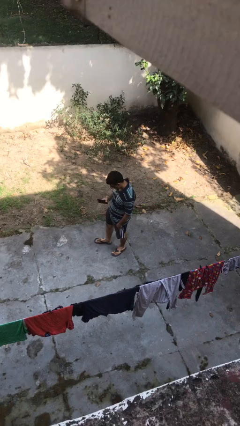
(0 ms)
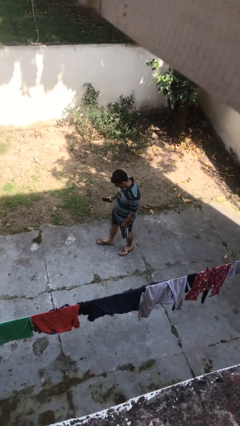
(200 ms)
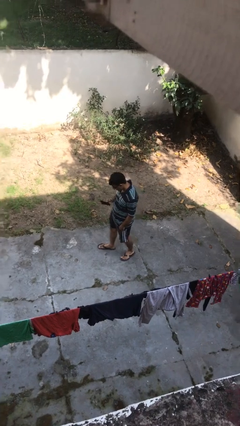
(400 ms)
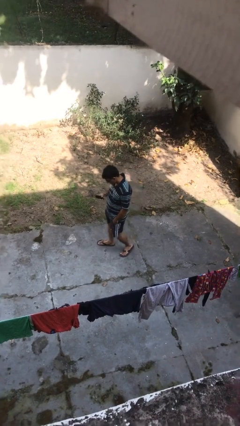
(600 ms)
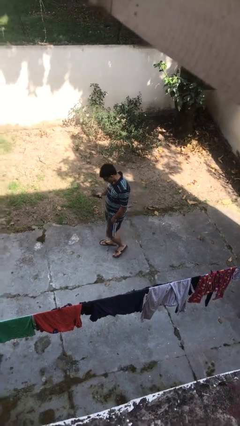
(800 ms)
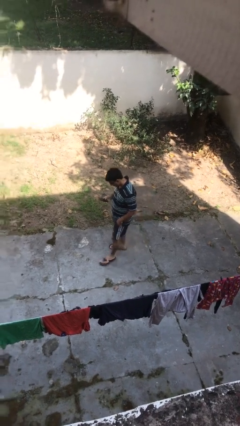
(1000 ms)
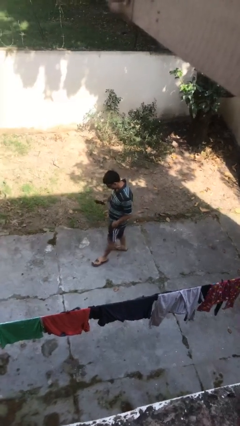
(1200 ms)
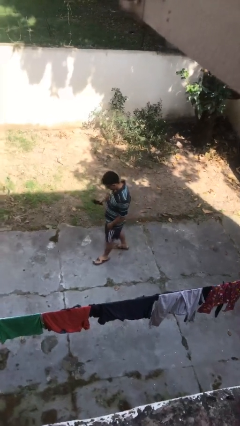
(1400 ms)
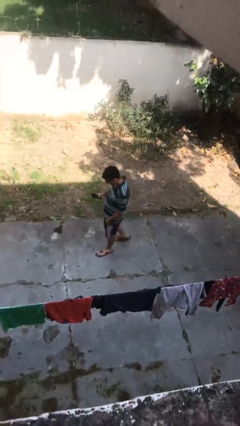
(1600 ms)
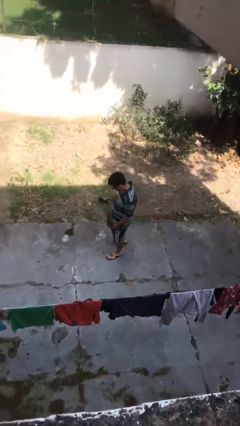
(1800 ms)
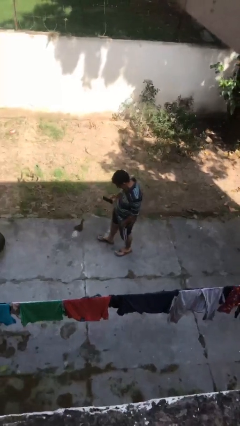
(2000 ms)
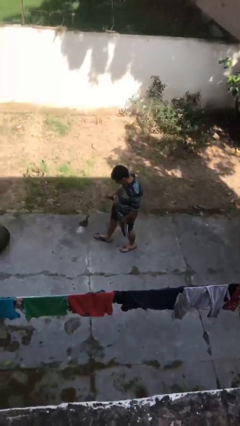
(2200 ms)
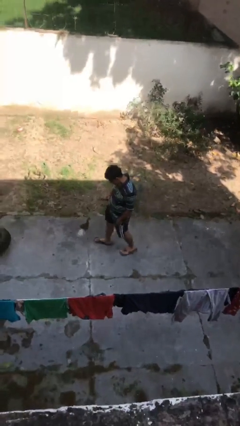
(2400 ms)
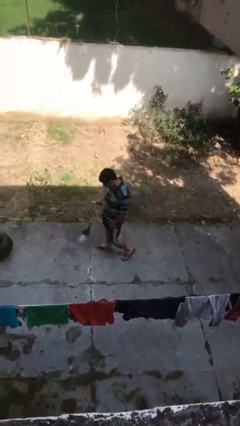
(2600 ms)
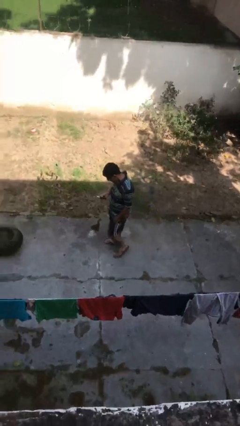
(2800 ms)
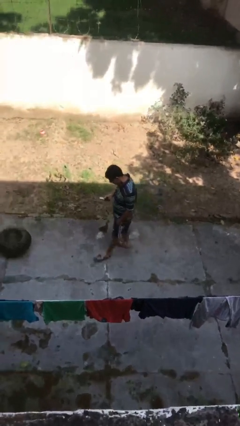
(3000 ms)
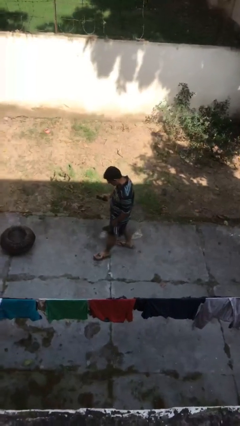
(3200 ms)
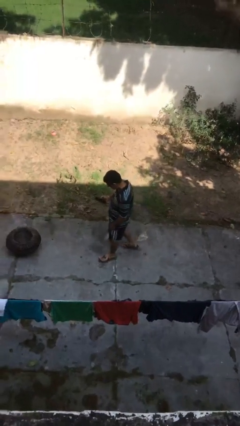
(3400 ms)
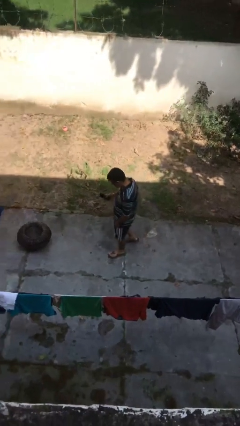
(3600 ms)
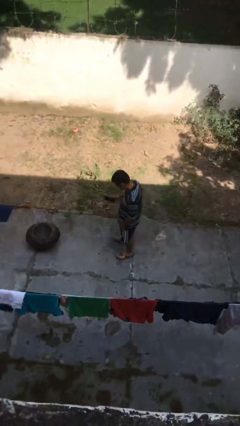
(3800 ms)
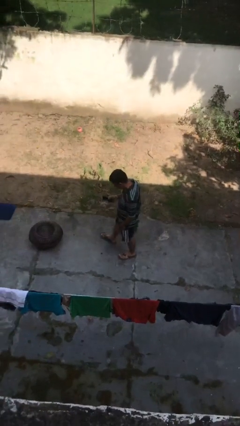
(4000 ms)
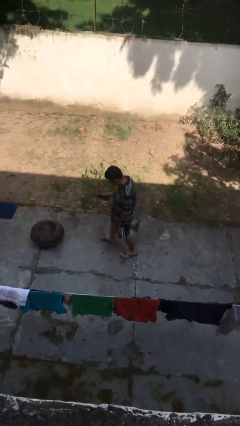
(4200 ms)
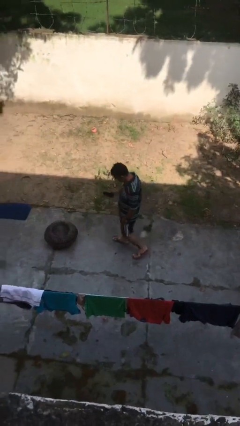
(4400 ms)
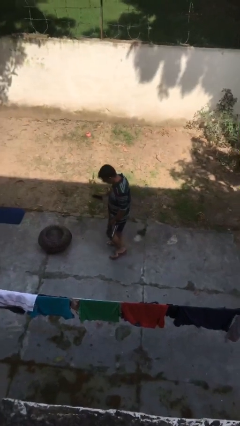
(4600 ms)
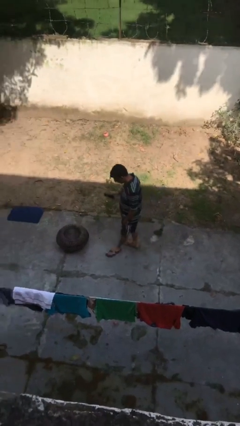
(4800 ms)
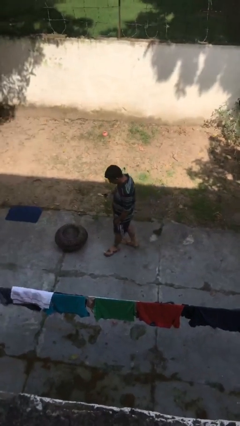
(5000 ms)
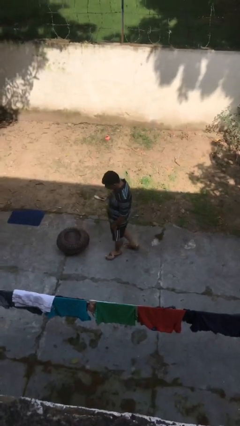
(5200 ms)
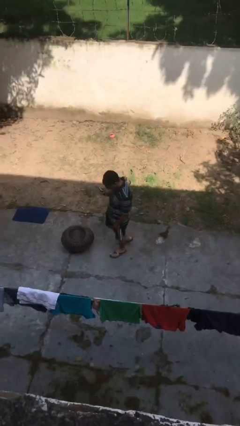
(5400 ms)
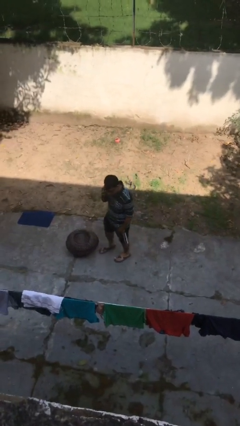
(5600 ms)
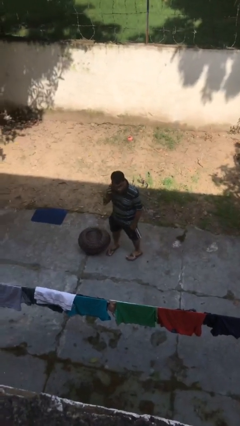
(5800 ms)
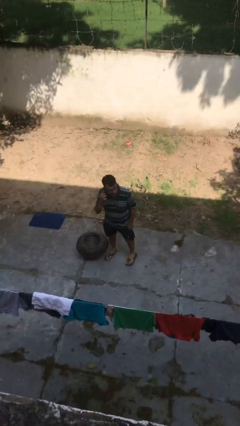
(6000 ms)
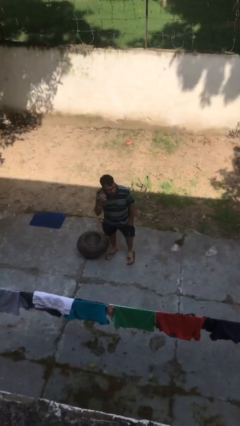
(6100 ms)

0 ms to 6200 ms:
person texts on phone

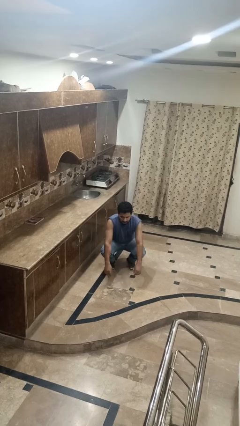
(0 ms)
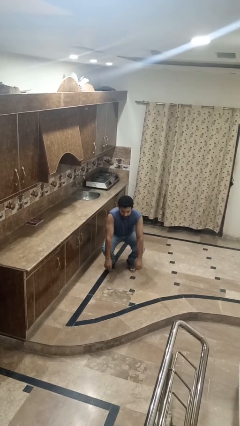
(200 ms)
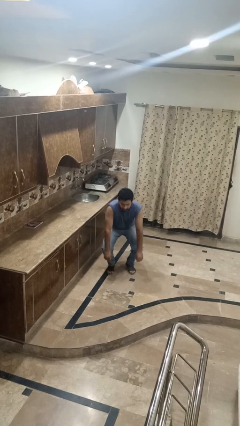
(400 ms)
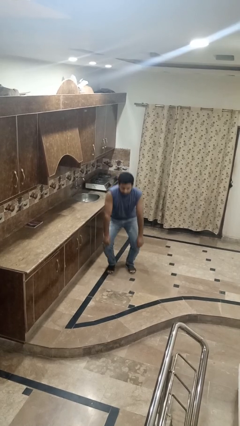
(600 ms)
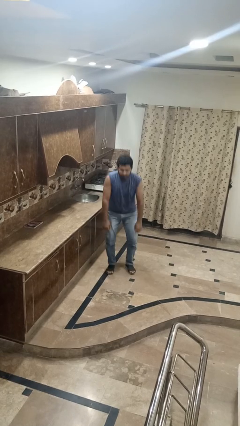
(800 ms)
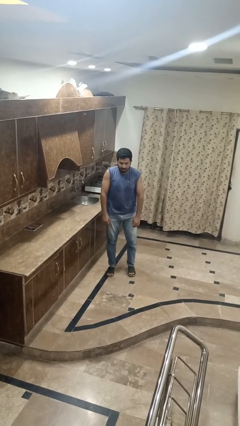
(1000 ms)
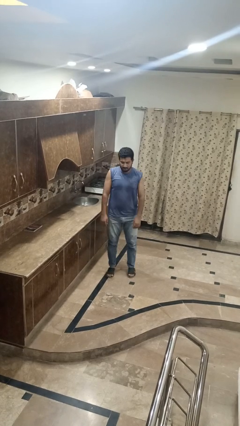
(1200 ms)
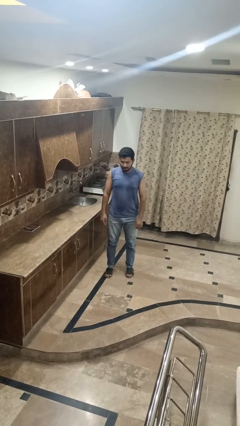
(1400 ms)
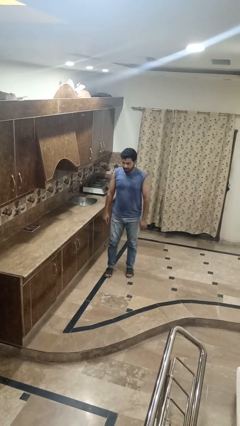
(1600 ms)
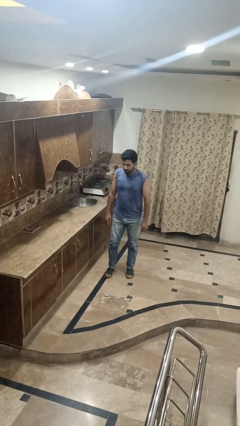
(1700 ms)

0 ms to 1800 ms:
person stands up

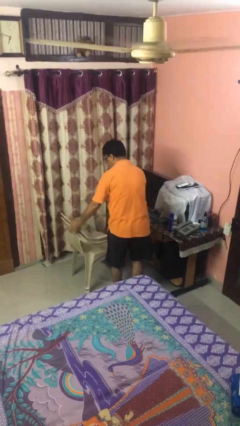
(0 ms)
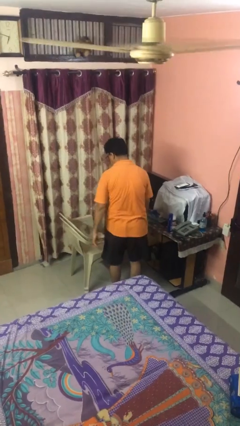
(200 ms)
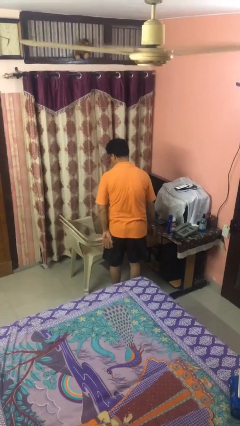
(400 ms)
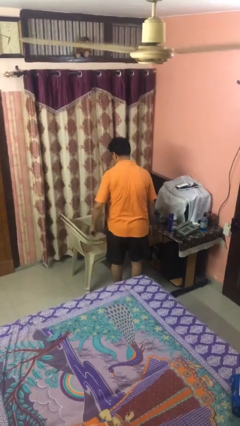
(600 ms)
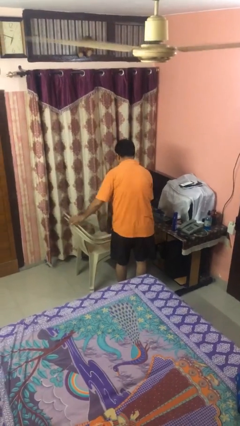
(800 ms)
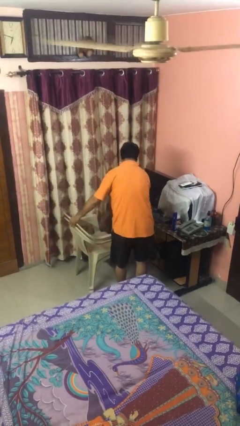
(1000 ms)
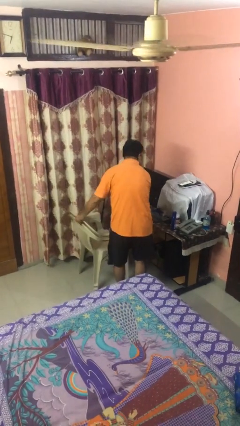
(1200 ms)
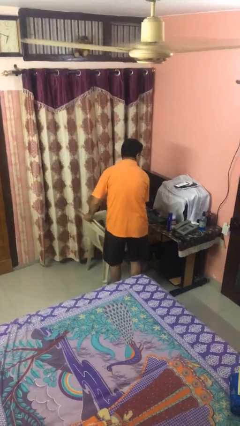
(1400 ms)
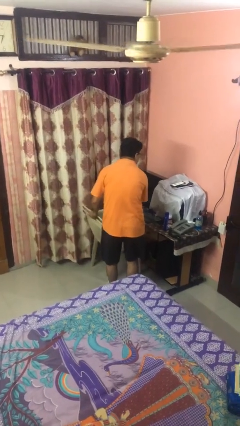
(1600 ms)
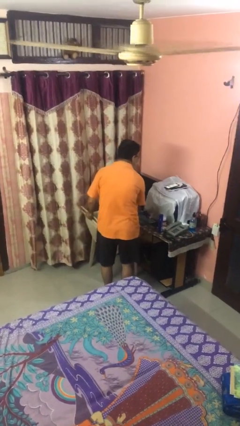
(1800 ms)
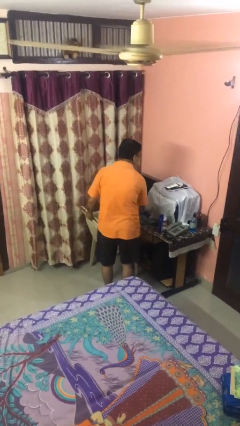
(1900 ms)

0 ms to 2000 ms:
person pushes in chair

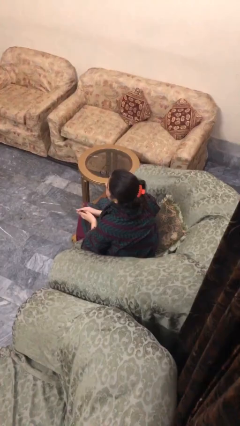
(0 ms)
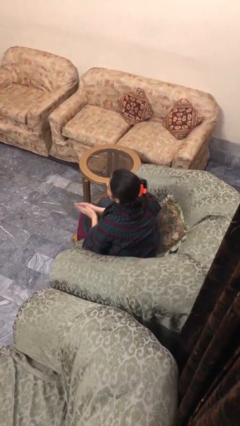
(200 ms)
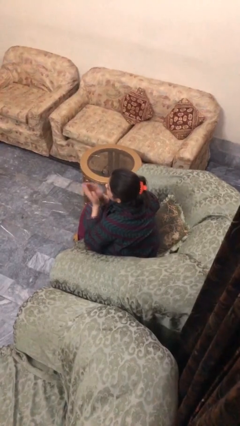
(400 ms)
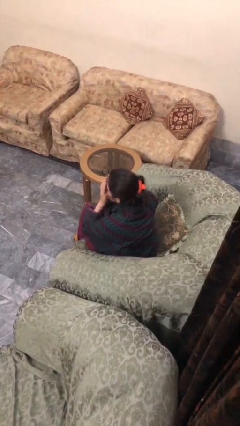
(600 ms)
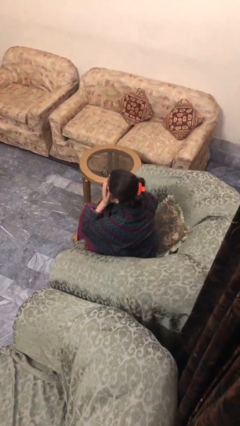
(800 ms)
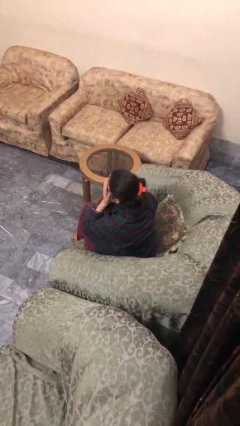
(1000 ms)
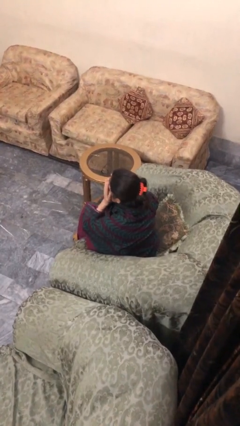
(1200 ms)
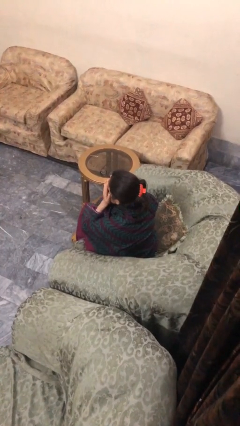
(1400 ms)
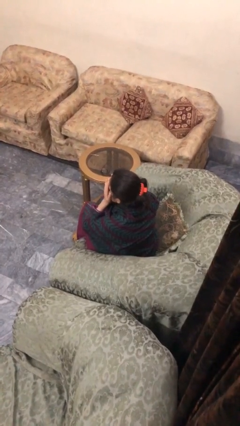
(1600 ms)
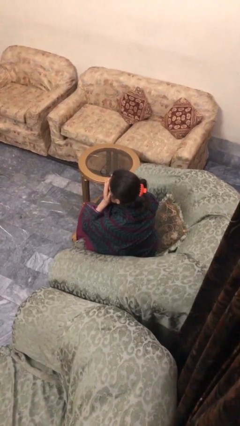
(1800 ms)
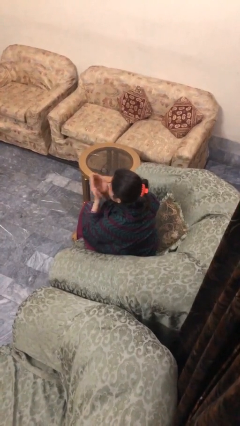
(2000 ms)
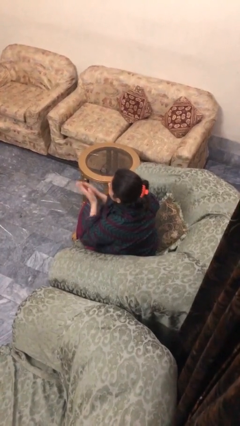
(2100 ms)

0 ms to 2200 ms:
person covers face with hands

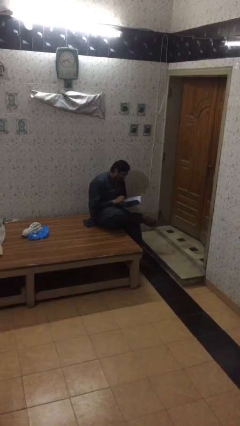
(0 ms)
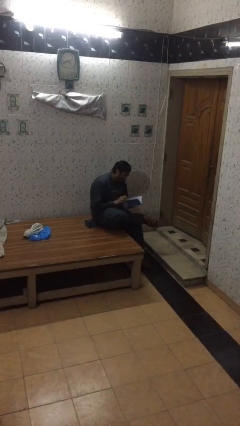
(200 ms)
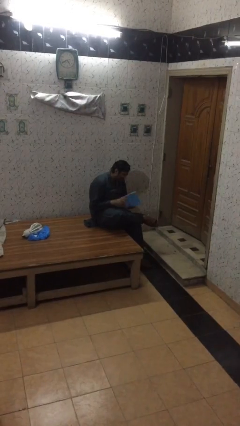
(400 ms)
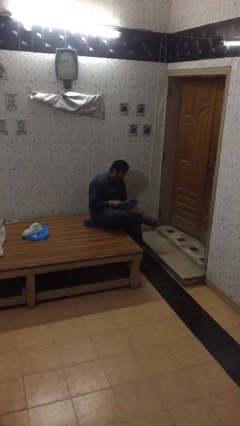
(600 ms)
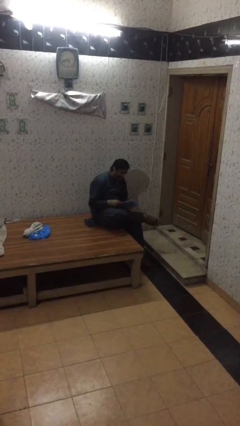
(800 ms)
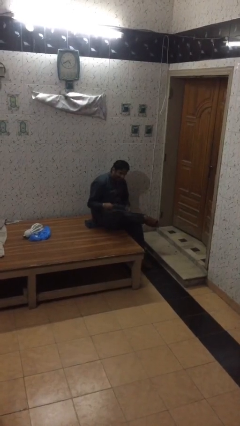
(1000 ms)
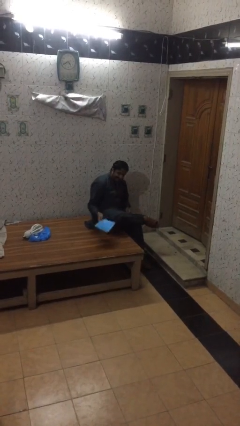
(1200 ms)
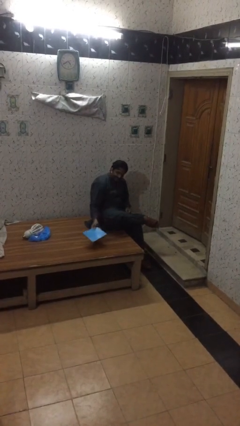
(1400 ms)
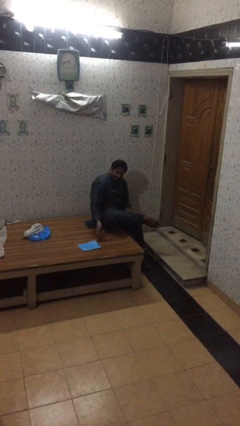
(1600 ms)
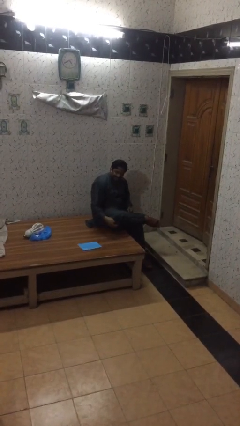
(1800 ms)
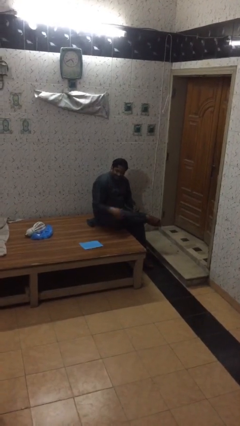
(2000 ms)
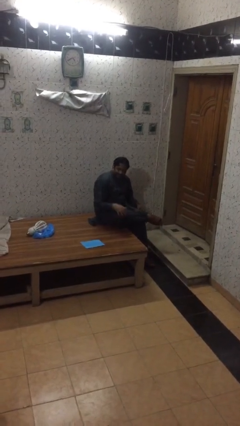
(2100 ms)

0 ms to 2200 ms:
person puts down object on table

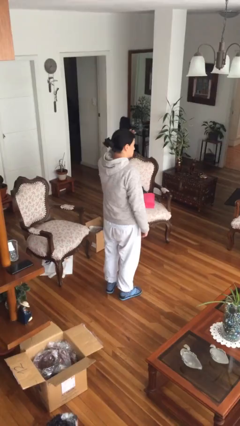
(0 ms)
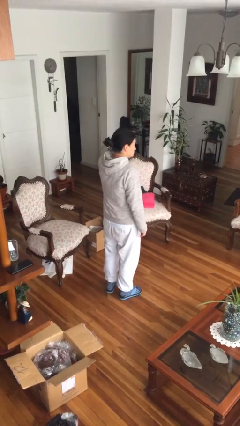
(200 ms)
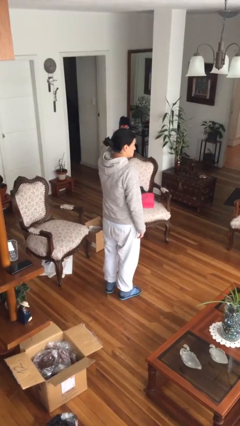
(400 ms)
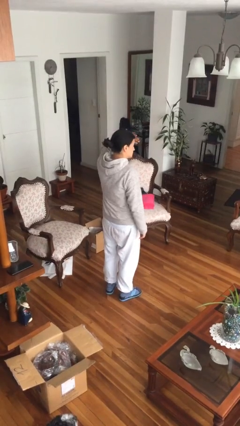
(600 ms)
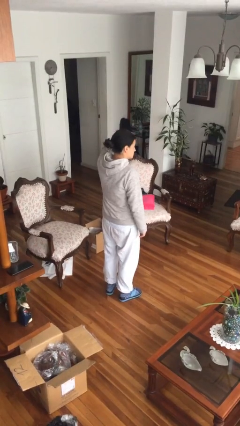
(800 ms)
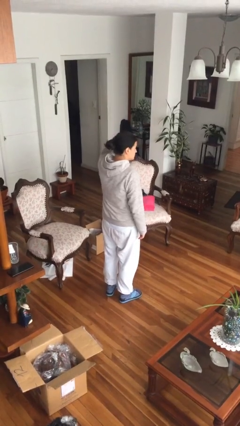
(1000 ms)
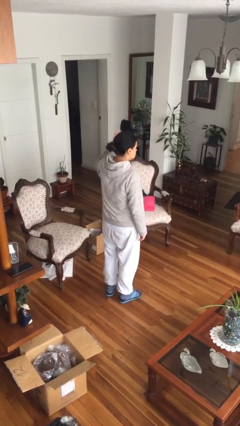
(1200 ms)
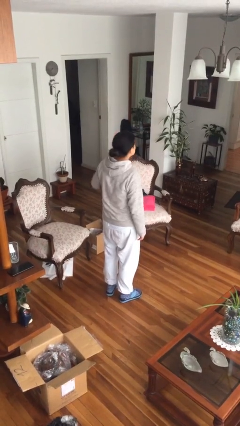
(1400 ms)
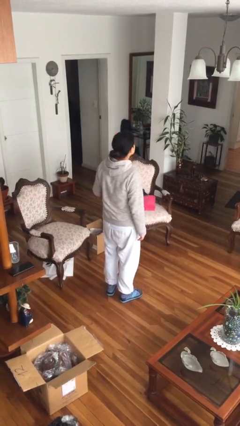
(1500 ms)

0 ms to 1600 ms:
person pats head

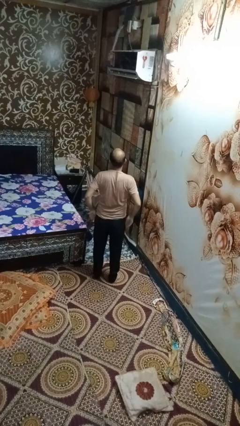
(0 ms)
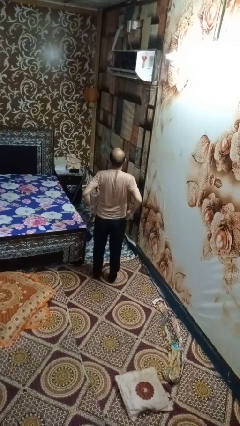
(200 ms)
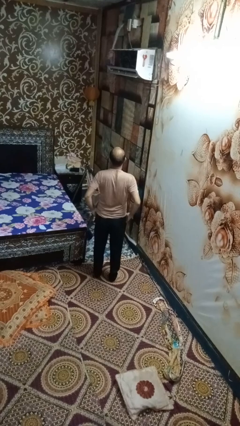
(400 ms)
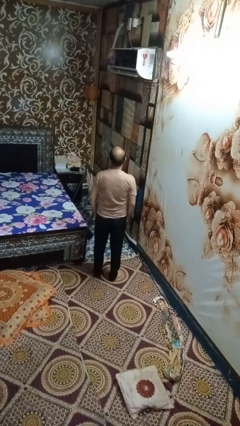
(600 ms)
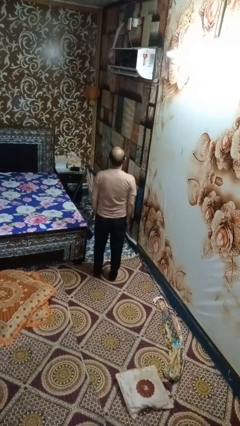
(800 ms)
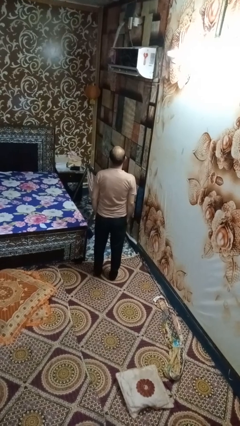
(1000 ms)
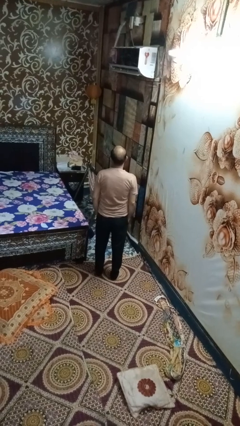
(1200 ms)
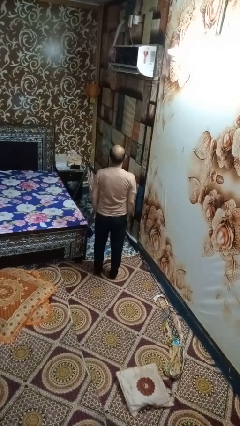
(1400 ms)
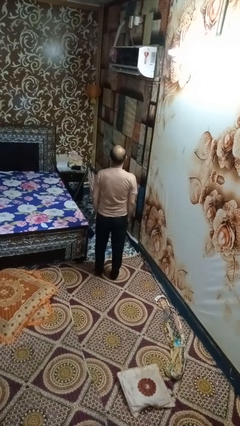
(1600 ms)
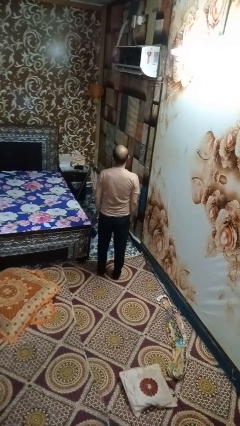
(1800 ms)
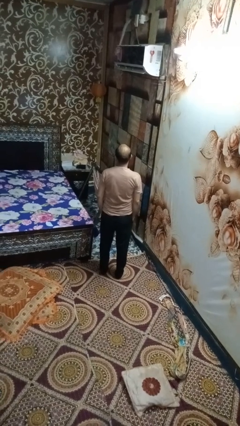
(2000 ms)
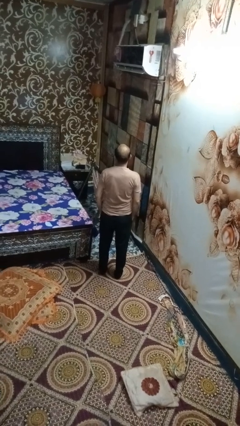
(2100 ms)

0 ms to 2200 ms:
person puts hands in back pockets
